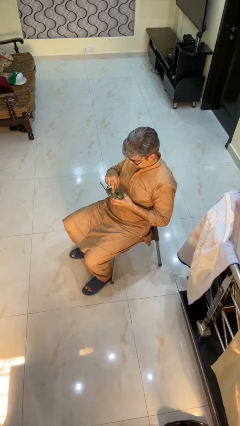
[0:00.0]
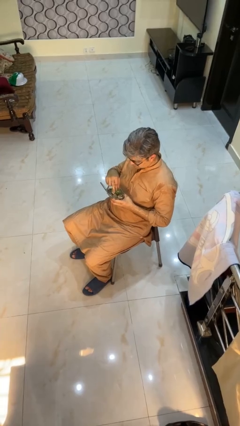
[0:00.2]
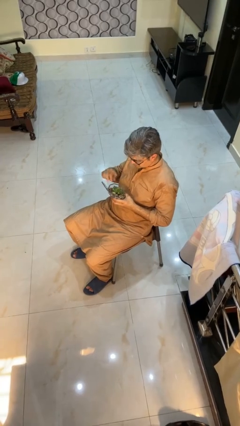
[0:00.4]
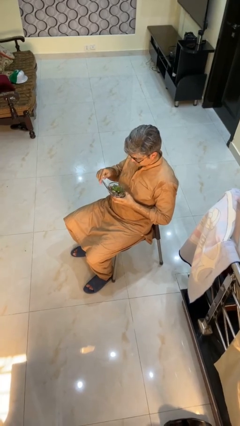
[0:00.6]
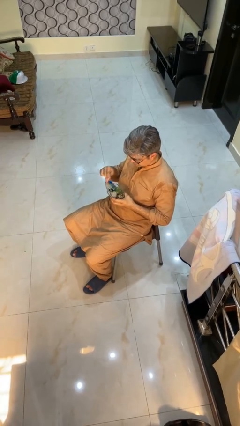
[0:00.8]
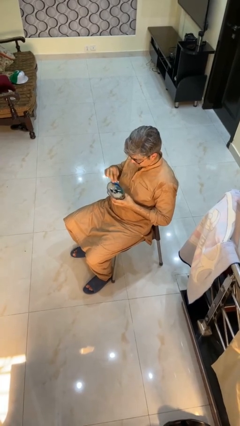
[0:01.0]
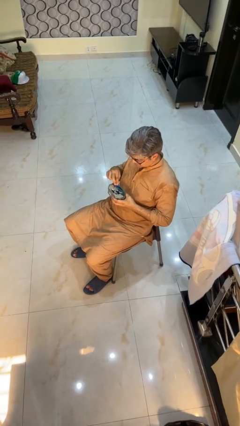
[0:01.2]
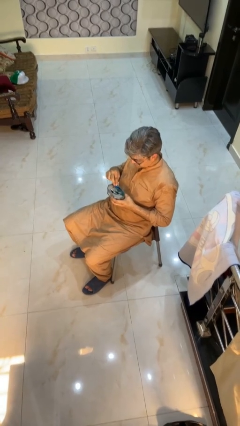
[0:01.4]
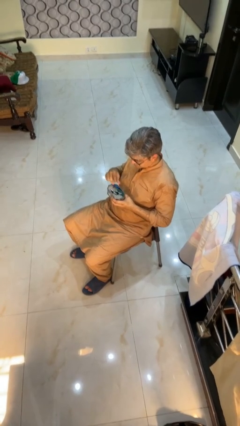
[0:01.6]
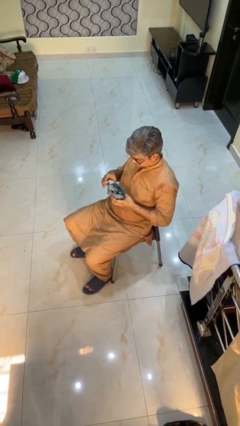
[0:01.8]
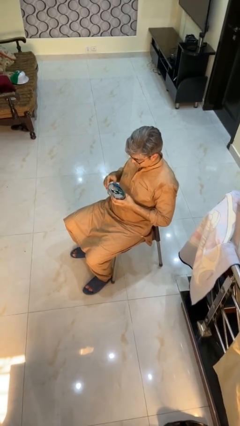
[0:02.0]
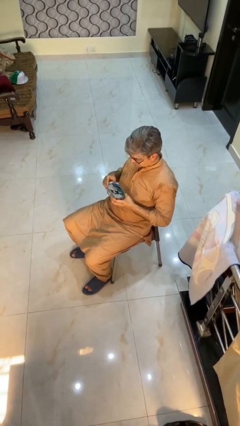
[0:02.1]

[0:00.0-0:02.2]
person closes jewelry box

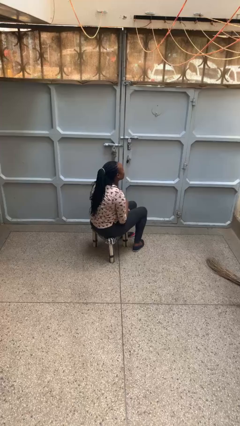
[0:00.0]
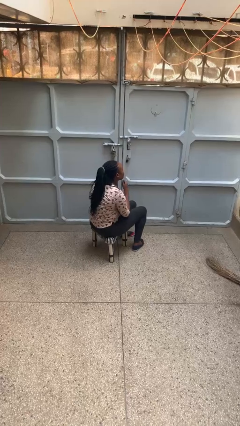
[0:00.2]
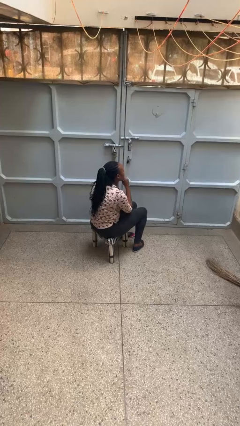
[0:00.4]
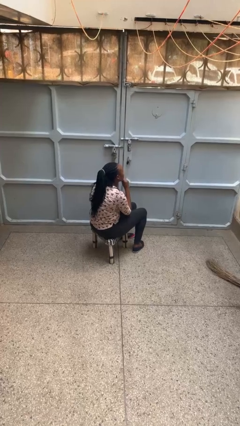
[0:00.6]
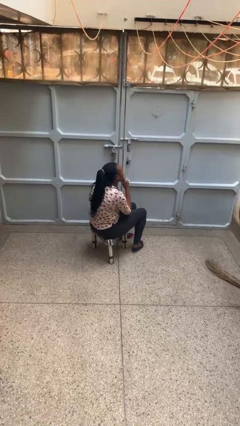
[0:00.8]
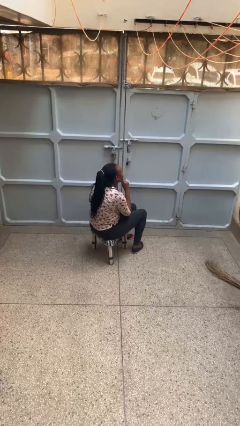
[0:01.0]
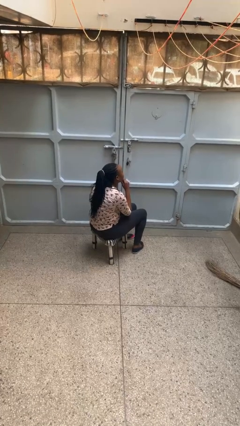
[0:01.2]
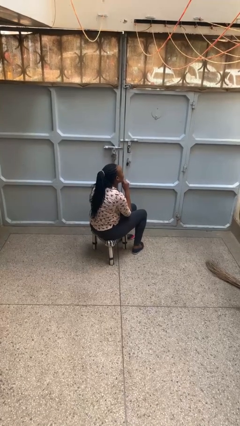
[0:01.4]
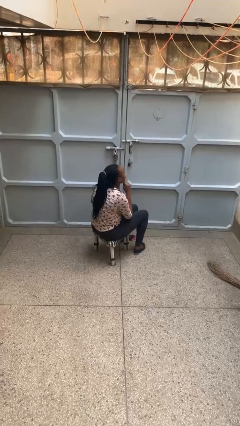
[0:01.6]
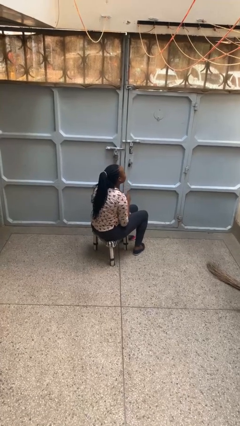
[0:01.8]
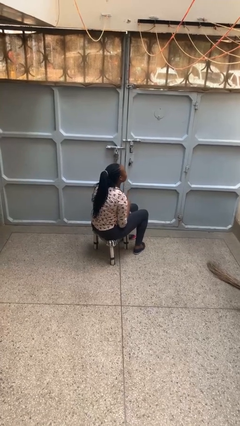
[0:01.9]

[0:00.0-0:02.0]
person strokes chin

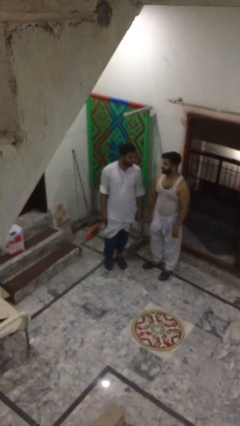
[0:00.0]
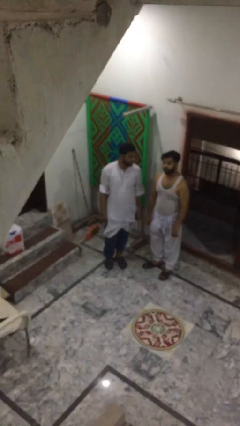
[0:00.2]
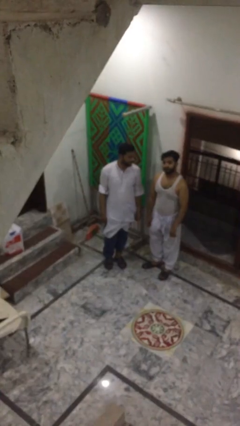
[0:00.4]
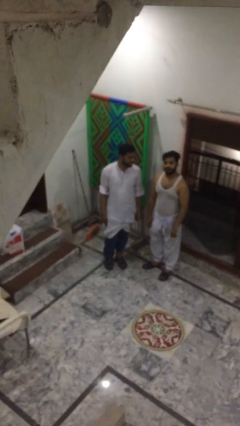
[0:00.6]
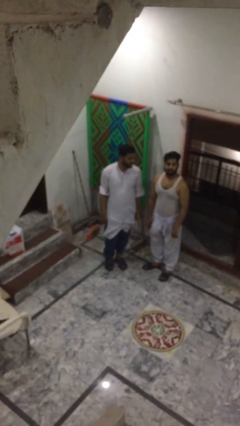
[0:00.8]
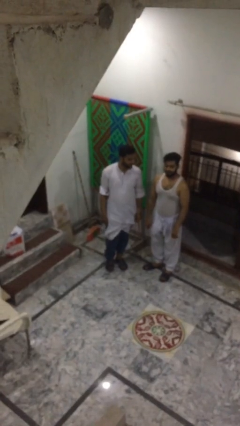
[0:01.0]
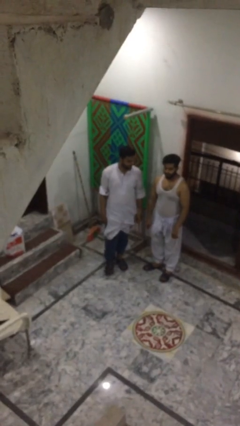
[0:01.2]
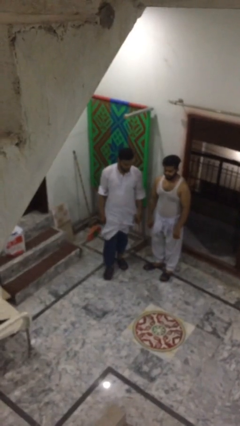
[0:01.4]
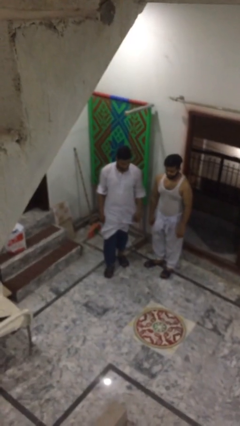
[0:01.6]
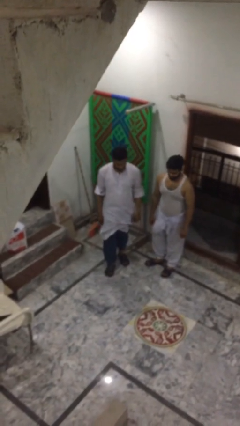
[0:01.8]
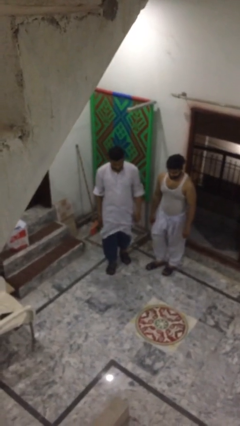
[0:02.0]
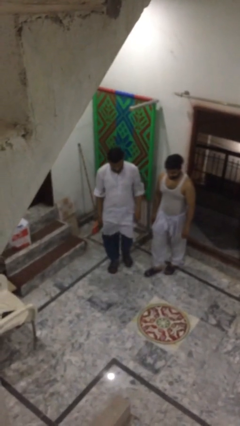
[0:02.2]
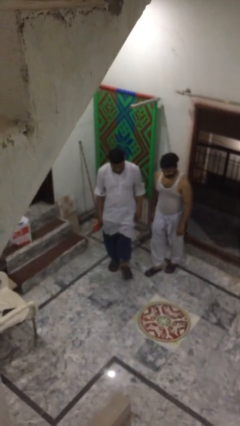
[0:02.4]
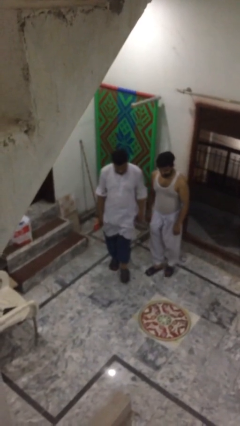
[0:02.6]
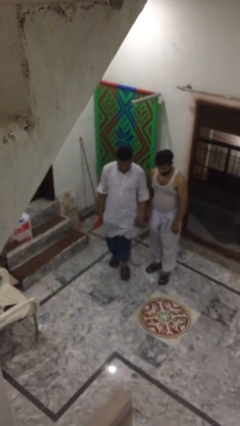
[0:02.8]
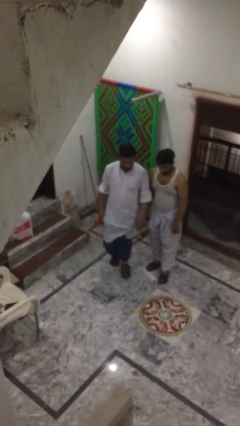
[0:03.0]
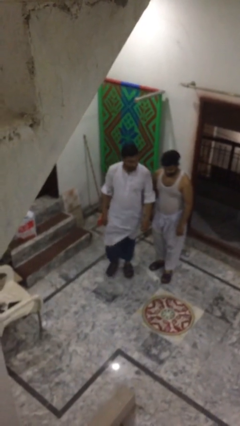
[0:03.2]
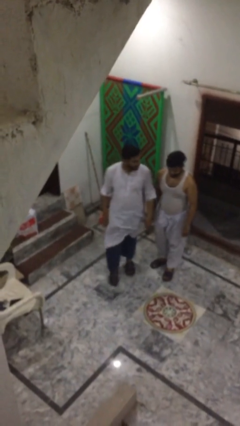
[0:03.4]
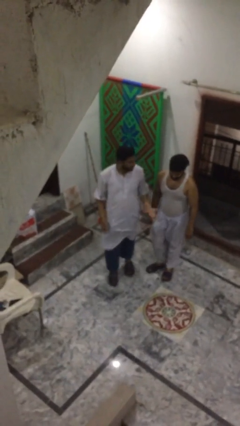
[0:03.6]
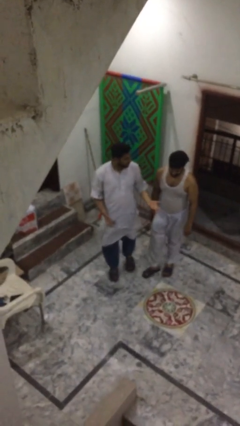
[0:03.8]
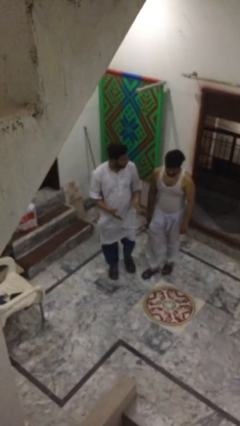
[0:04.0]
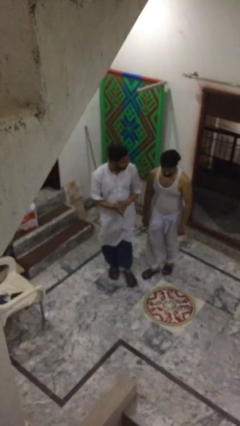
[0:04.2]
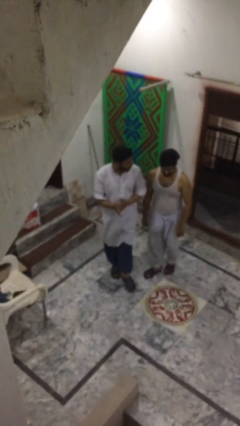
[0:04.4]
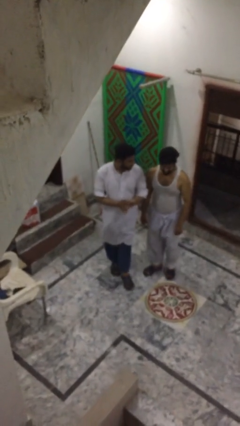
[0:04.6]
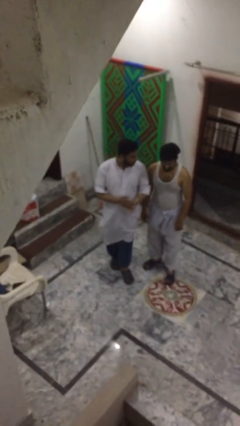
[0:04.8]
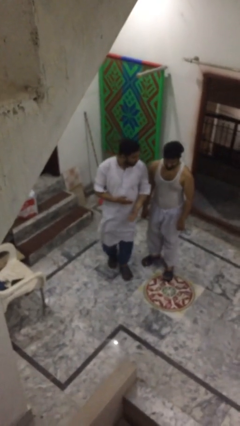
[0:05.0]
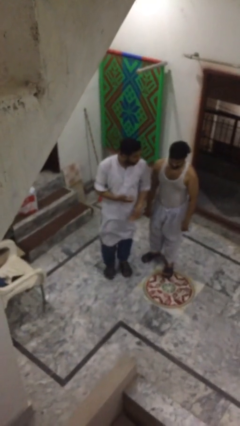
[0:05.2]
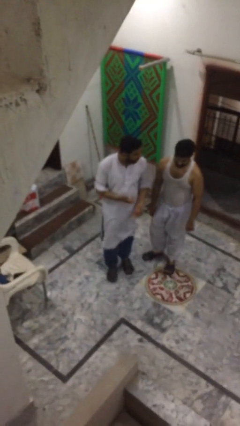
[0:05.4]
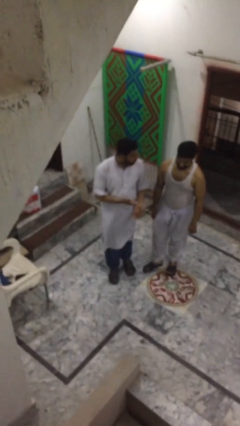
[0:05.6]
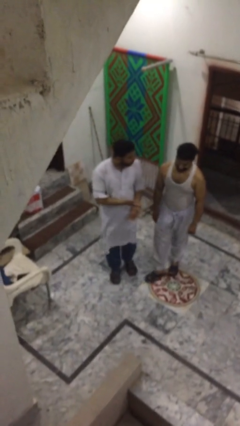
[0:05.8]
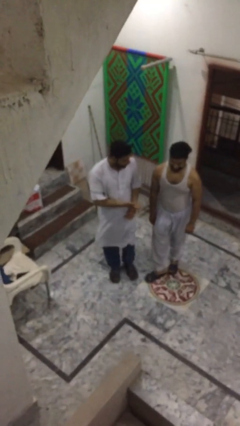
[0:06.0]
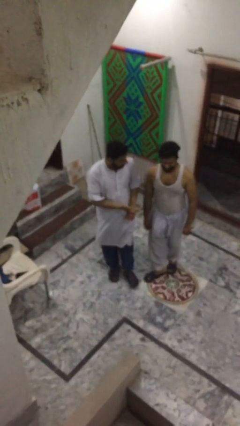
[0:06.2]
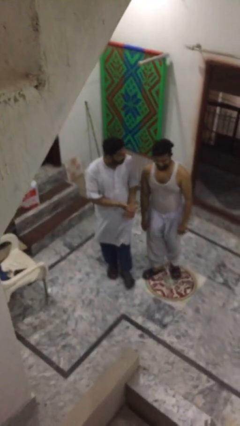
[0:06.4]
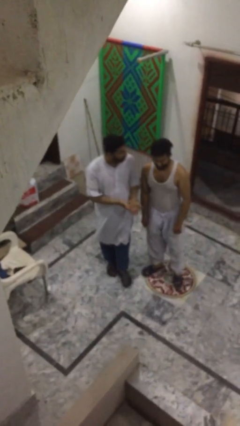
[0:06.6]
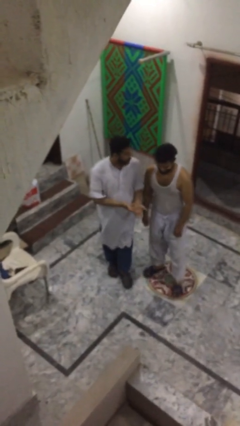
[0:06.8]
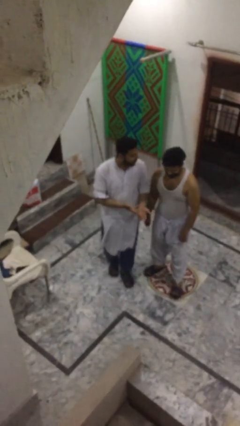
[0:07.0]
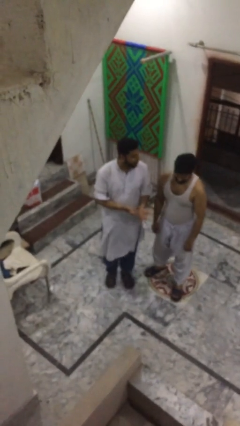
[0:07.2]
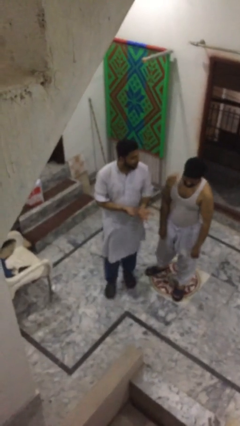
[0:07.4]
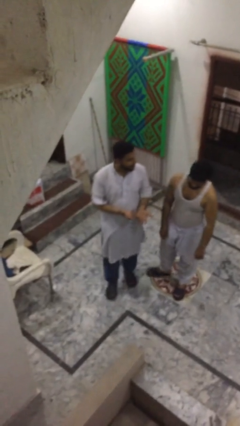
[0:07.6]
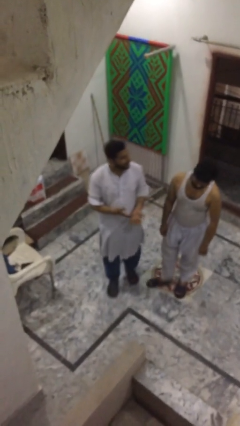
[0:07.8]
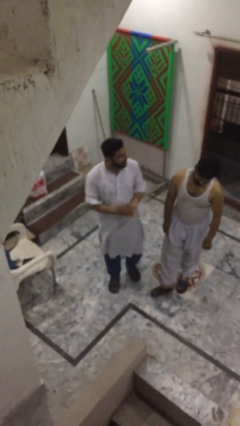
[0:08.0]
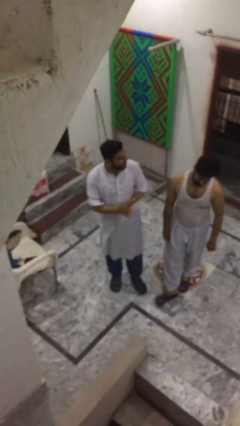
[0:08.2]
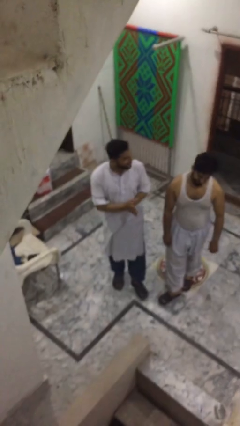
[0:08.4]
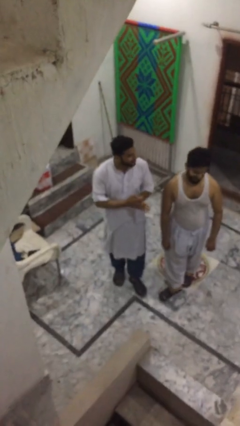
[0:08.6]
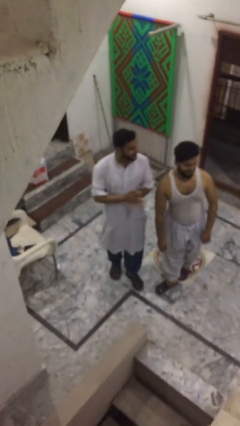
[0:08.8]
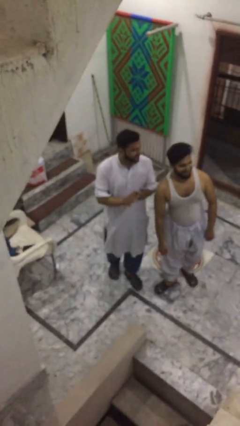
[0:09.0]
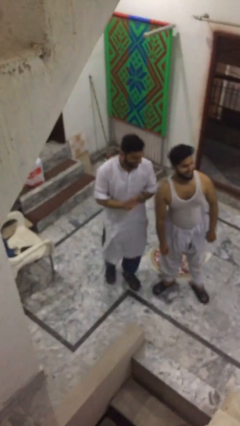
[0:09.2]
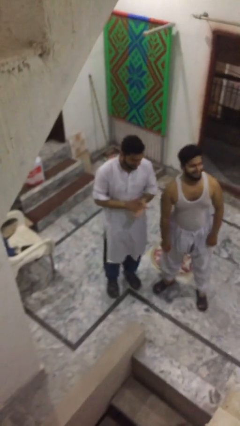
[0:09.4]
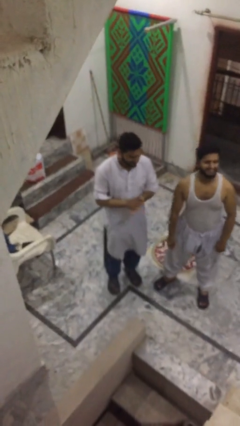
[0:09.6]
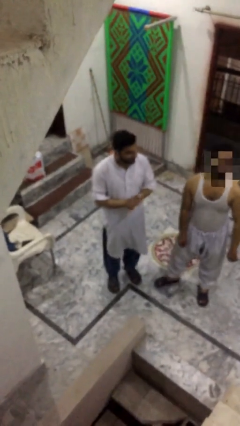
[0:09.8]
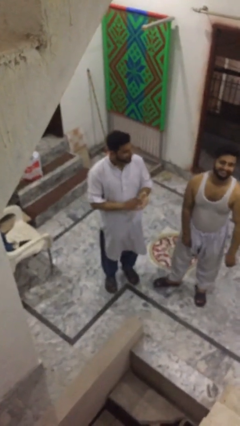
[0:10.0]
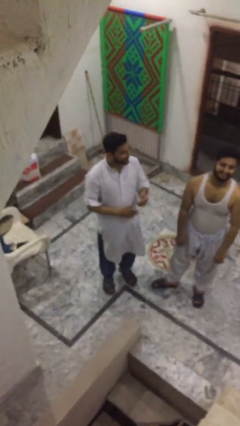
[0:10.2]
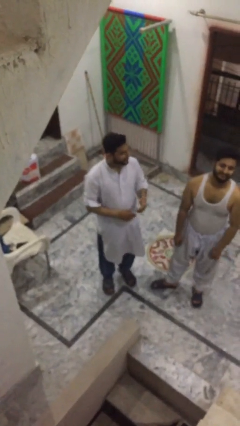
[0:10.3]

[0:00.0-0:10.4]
person talks to person

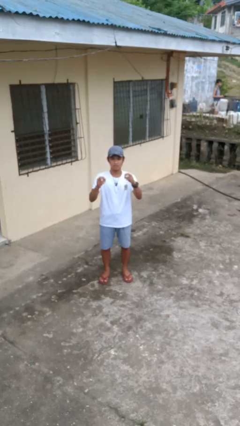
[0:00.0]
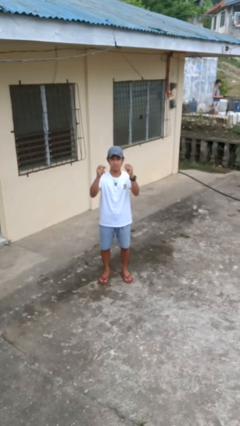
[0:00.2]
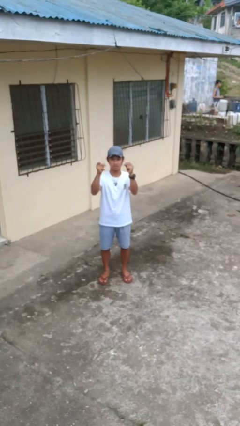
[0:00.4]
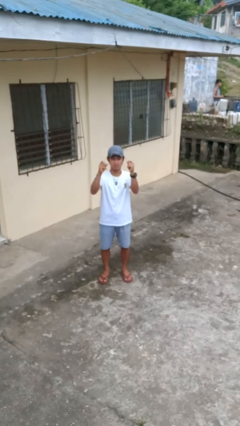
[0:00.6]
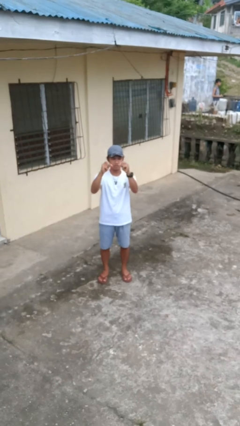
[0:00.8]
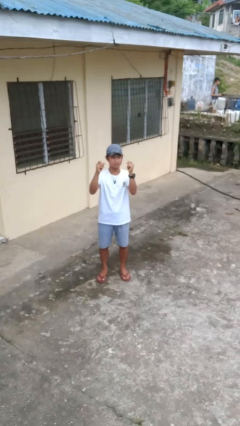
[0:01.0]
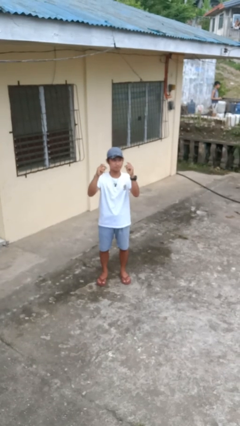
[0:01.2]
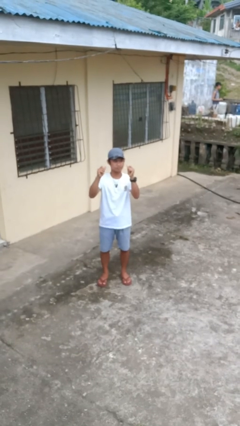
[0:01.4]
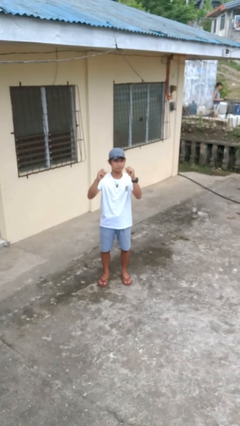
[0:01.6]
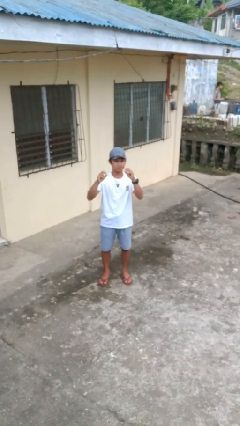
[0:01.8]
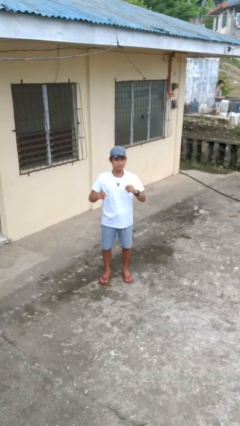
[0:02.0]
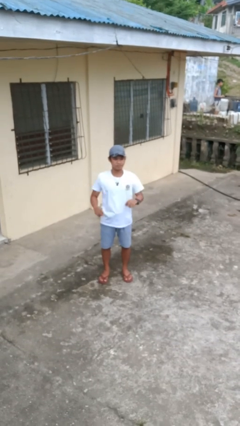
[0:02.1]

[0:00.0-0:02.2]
person snaps fingers

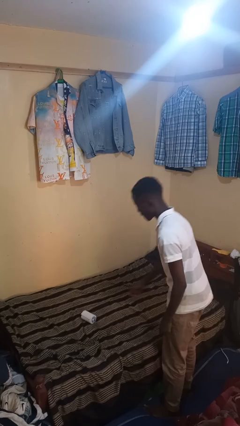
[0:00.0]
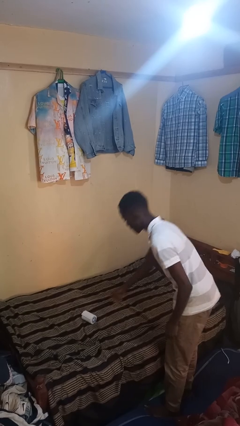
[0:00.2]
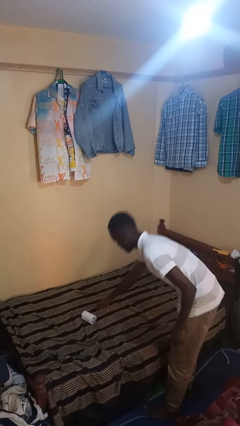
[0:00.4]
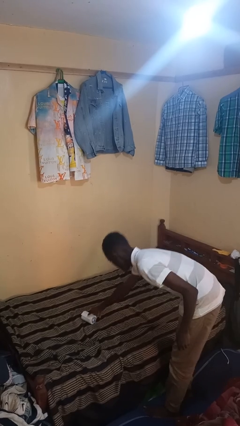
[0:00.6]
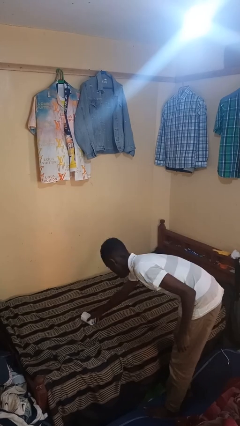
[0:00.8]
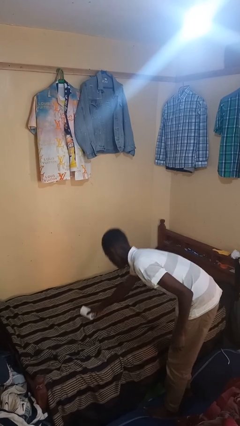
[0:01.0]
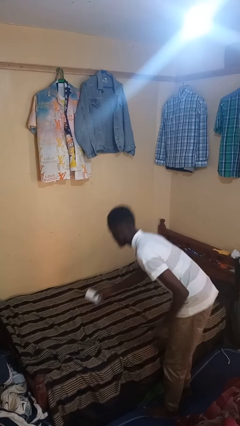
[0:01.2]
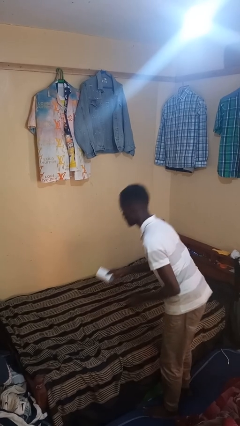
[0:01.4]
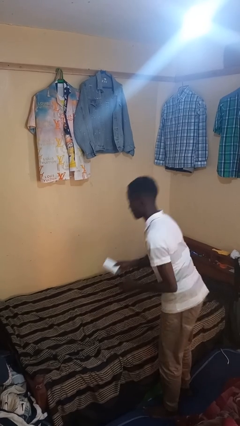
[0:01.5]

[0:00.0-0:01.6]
person picks up object from bed
